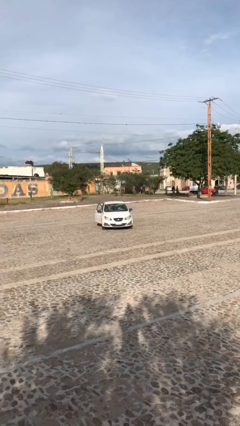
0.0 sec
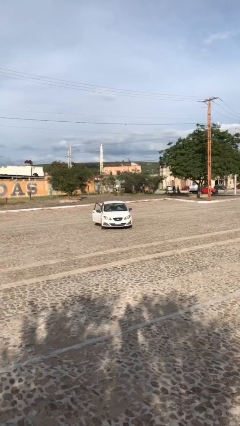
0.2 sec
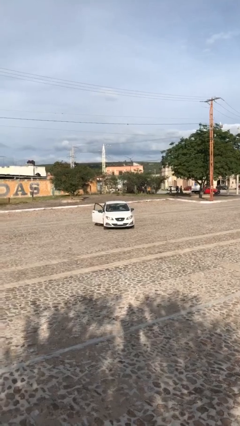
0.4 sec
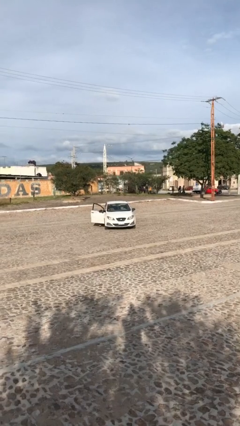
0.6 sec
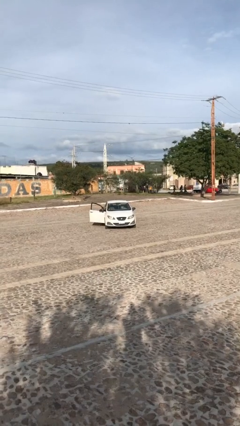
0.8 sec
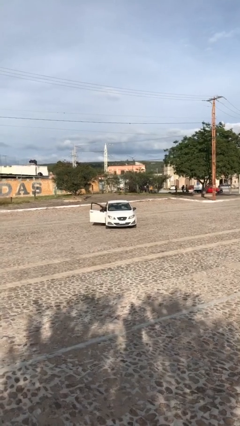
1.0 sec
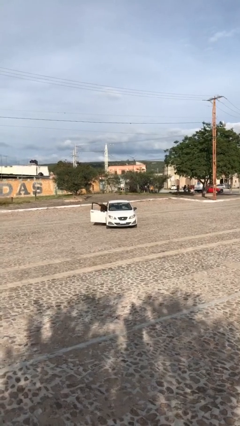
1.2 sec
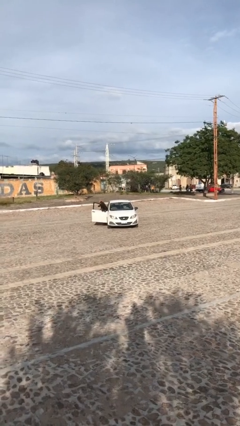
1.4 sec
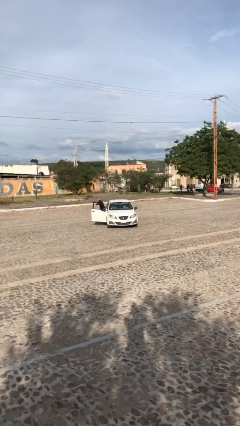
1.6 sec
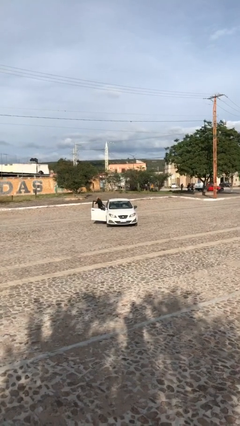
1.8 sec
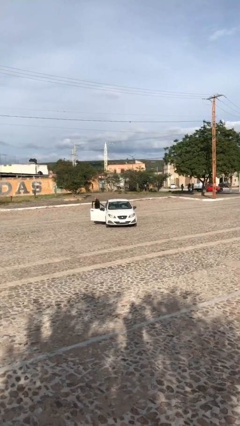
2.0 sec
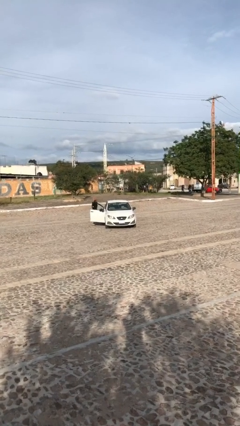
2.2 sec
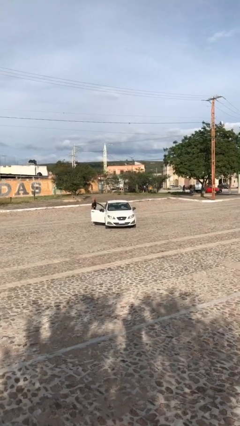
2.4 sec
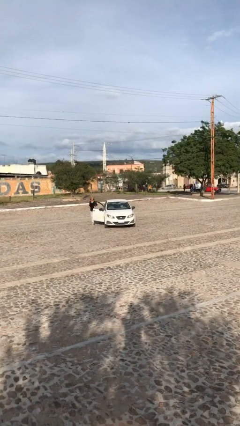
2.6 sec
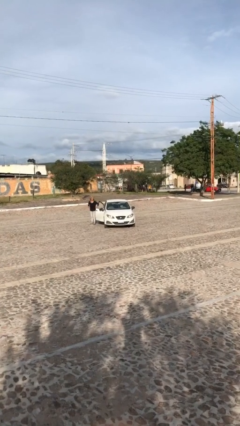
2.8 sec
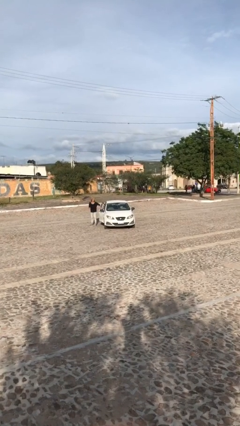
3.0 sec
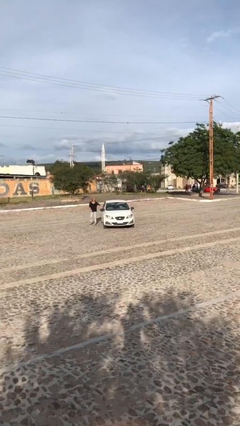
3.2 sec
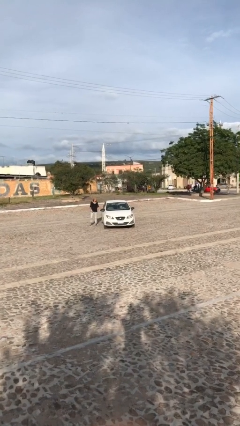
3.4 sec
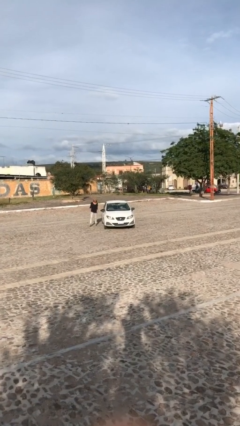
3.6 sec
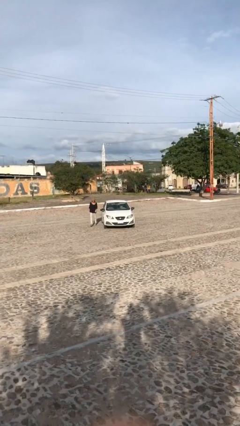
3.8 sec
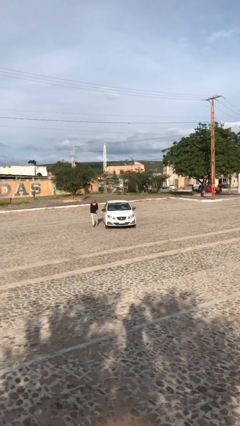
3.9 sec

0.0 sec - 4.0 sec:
car drops off person

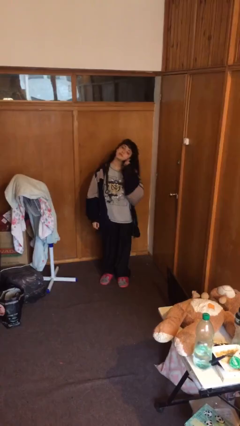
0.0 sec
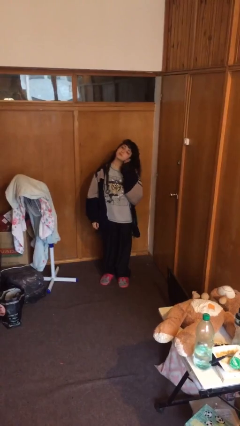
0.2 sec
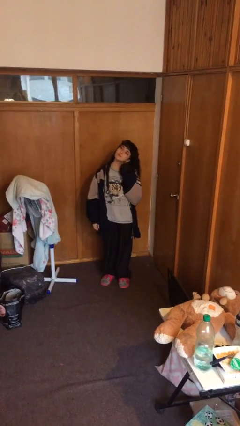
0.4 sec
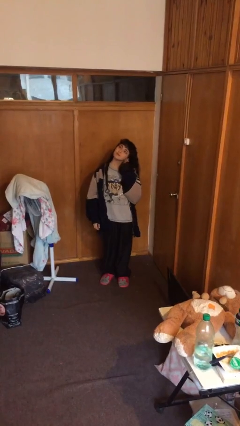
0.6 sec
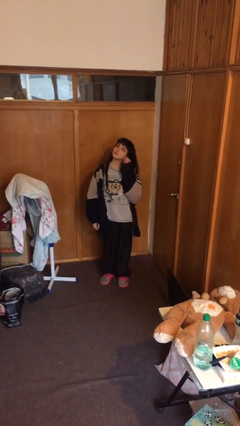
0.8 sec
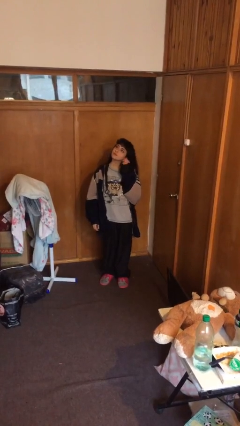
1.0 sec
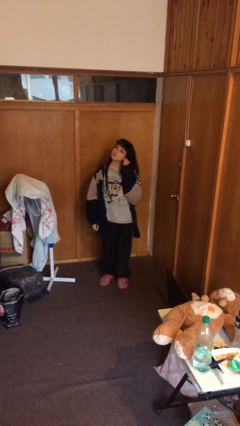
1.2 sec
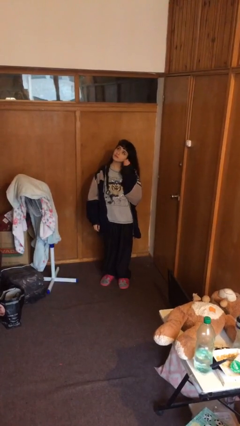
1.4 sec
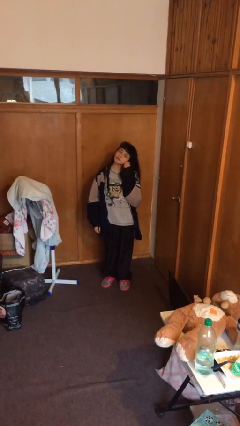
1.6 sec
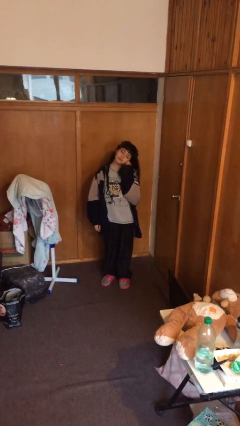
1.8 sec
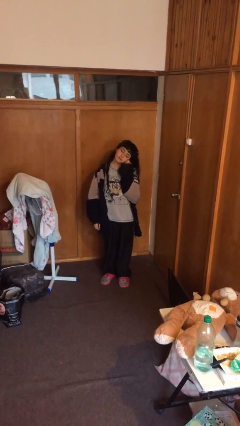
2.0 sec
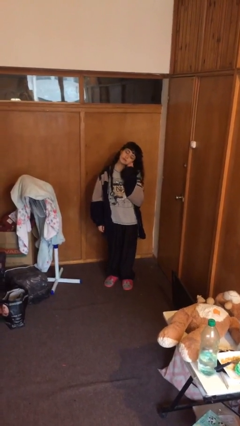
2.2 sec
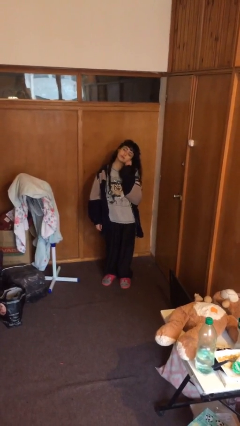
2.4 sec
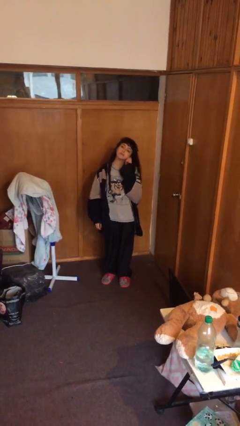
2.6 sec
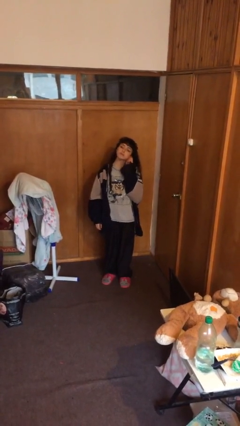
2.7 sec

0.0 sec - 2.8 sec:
person touches earlobe

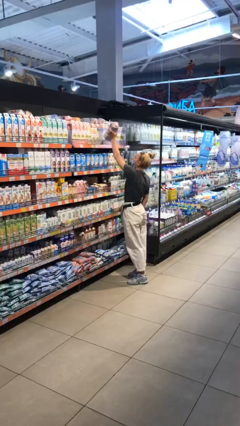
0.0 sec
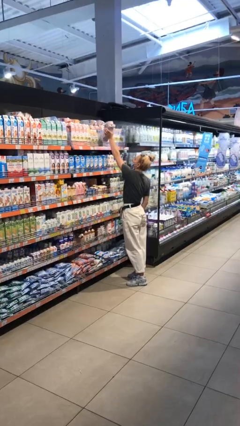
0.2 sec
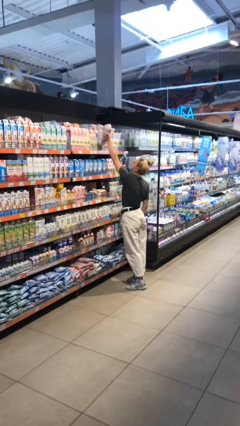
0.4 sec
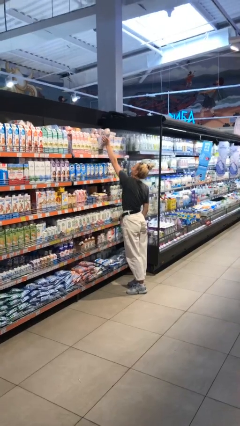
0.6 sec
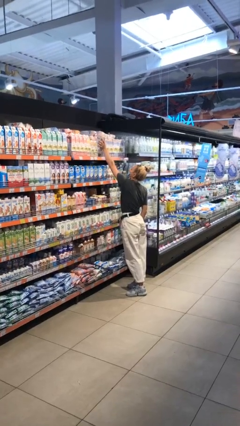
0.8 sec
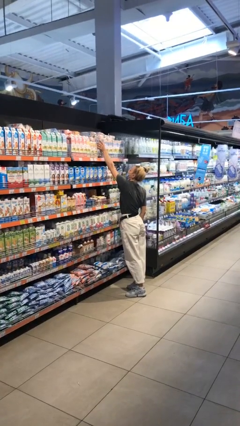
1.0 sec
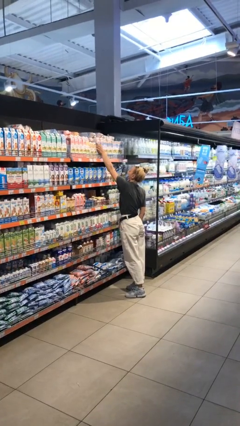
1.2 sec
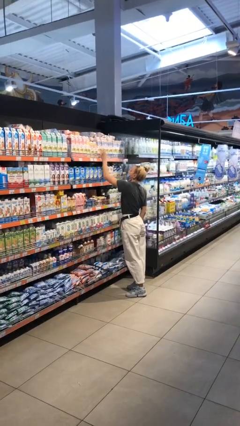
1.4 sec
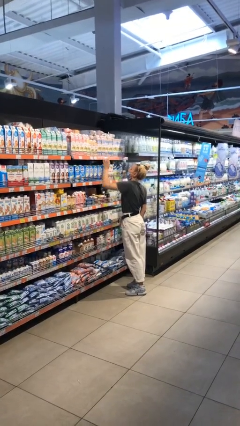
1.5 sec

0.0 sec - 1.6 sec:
person puts down object on shelf

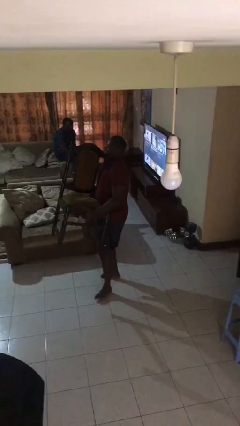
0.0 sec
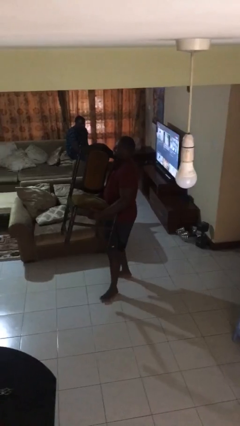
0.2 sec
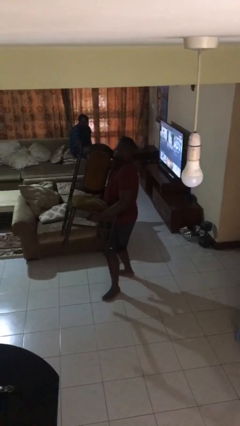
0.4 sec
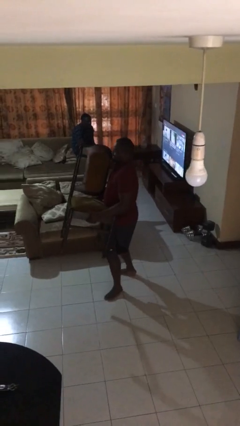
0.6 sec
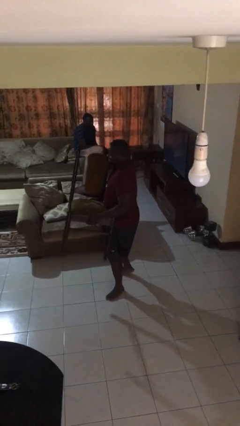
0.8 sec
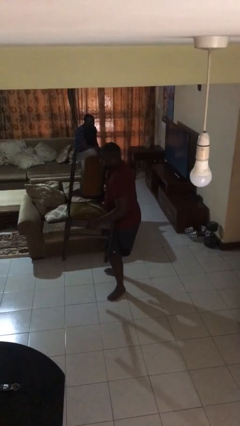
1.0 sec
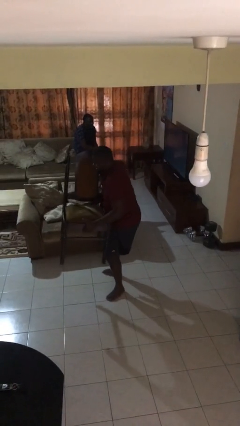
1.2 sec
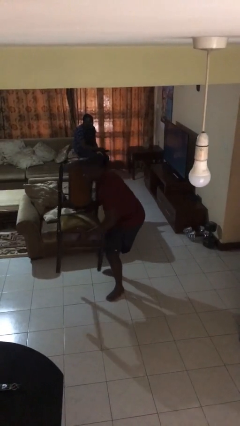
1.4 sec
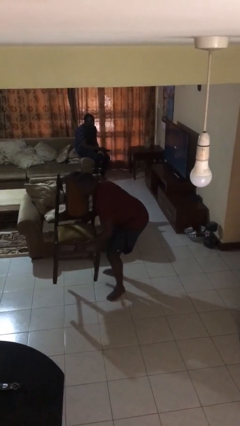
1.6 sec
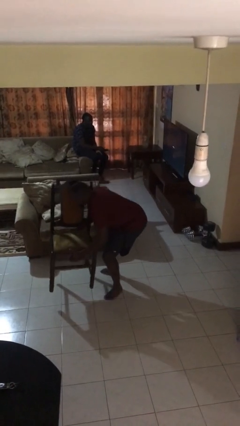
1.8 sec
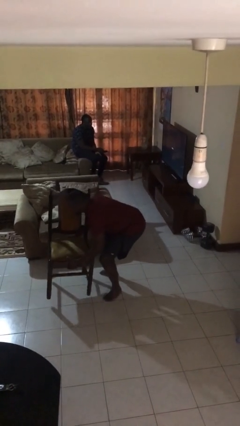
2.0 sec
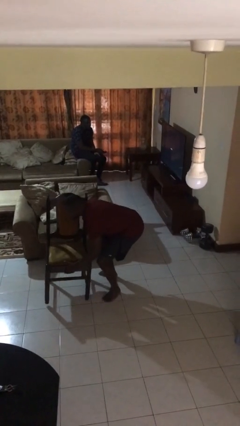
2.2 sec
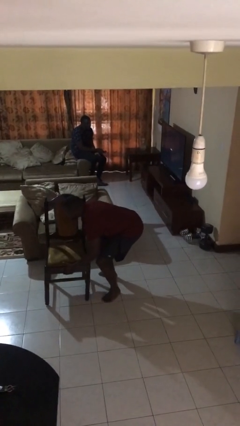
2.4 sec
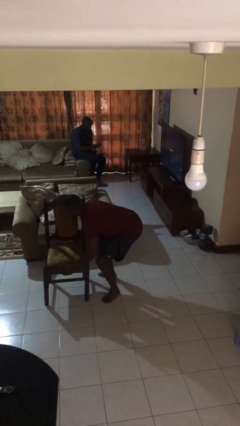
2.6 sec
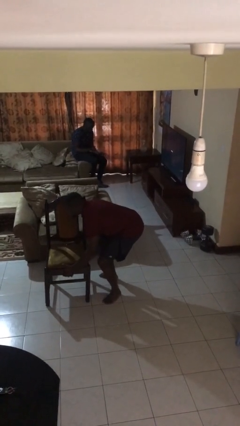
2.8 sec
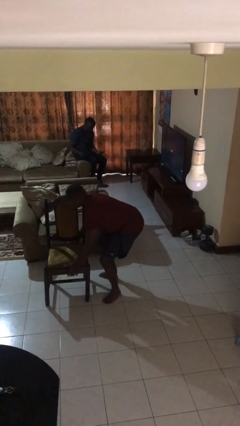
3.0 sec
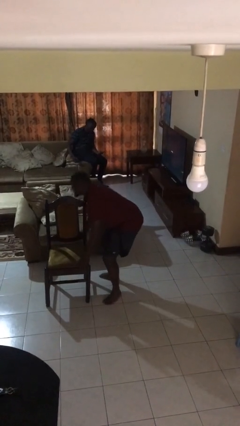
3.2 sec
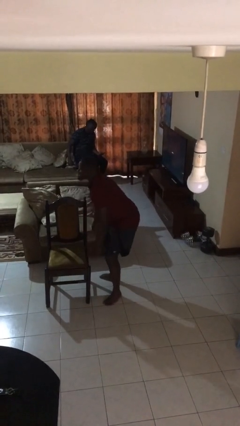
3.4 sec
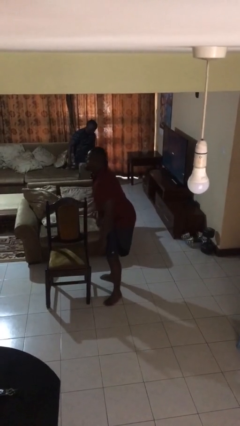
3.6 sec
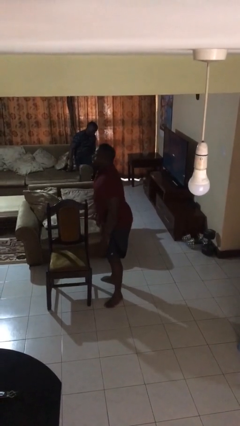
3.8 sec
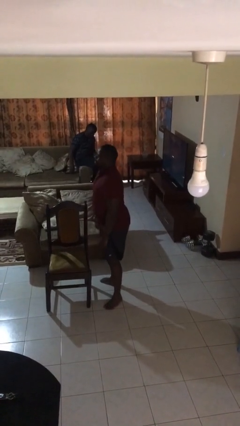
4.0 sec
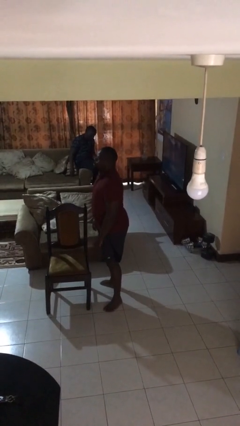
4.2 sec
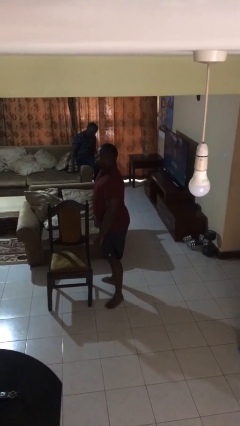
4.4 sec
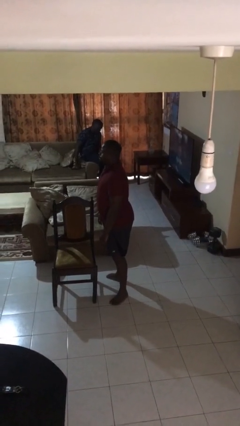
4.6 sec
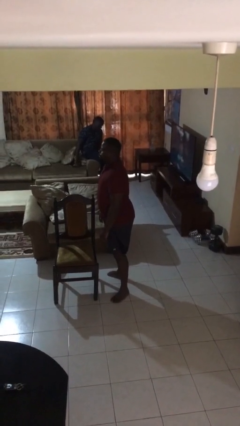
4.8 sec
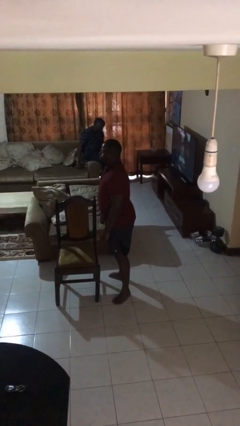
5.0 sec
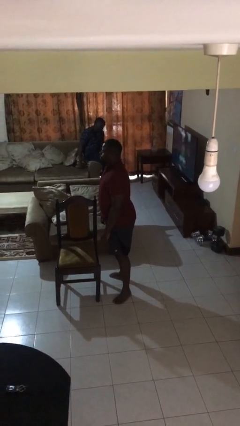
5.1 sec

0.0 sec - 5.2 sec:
person puts down object on floor

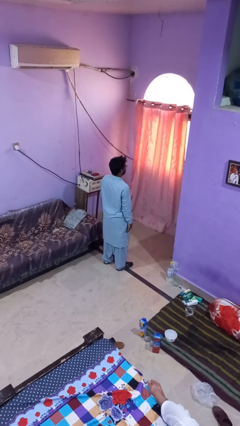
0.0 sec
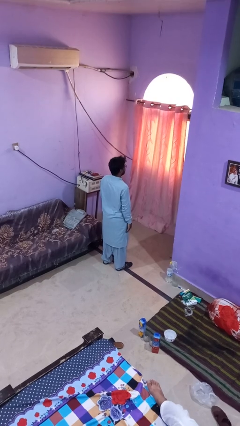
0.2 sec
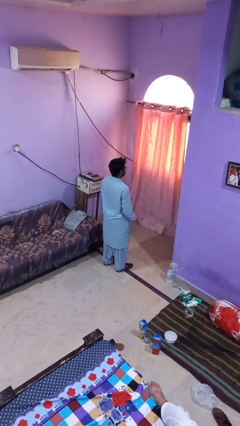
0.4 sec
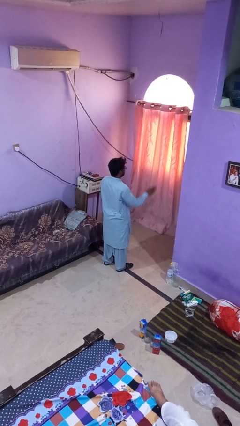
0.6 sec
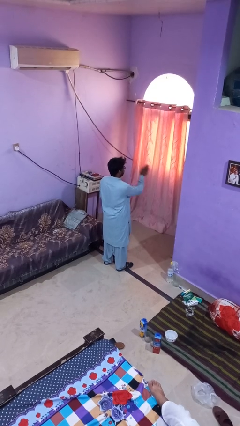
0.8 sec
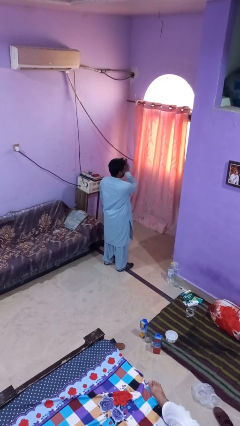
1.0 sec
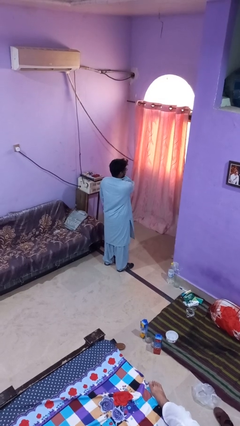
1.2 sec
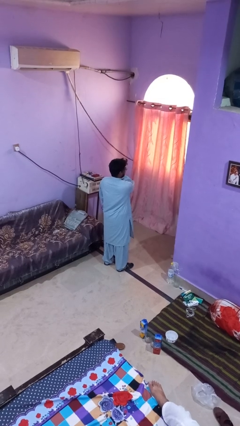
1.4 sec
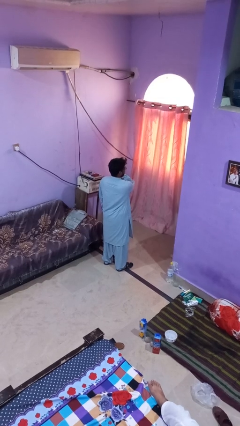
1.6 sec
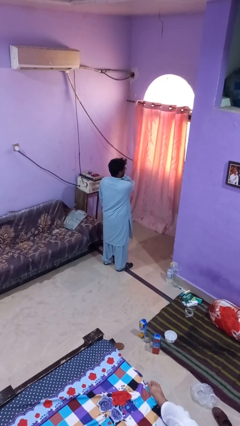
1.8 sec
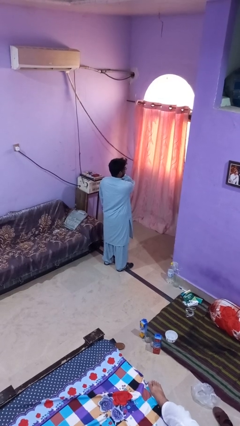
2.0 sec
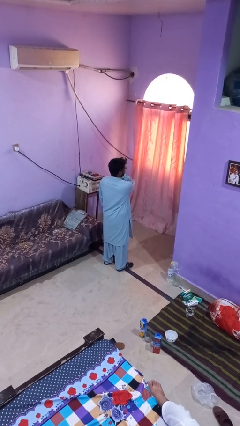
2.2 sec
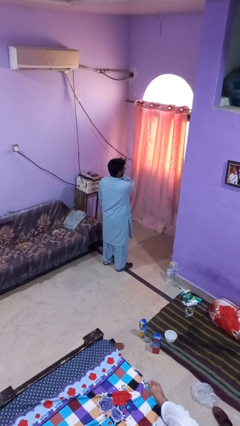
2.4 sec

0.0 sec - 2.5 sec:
person gestures swipe left

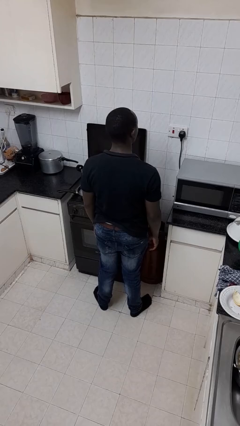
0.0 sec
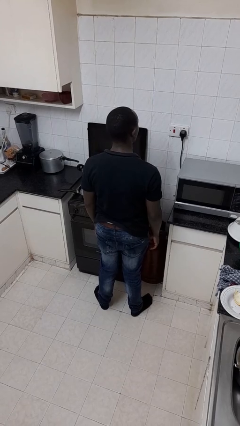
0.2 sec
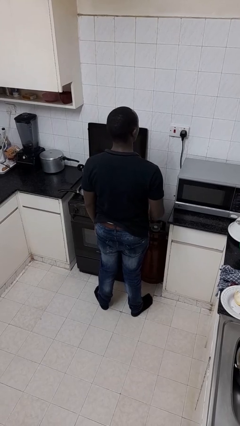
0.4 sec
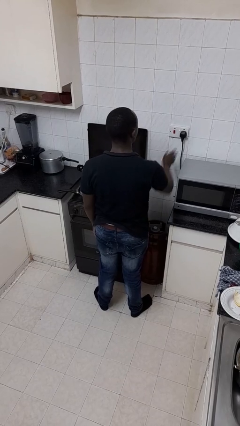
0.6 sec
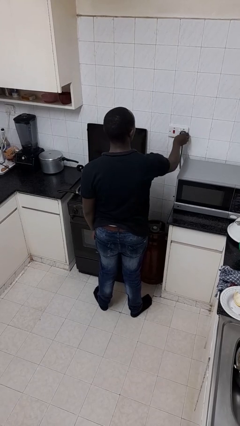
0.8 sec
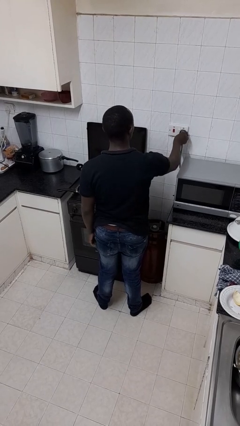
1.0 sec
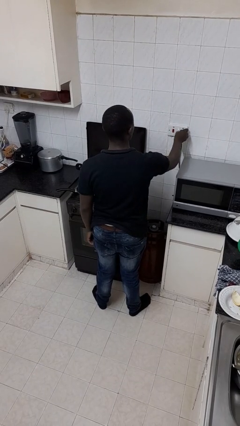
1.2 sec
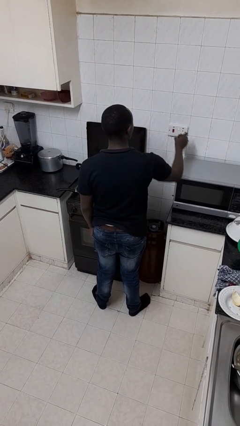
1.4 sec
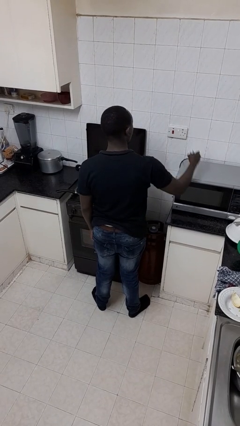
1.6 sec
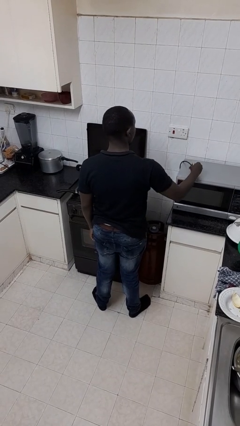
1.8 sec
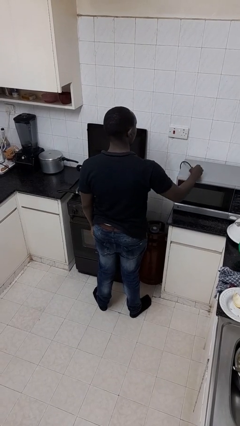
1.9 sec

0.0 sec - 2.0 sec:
person unplugs from electrical socket
